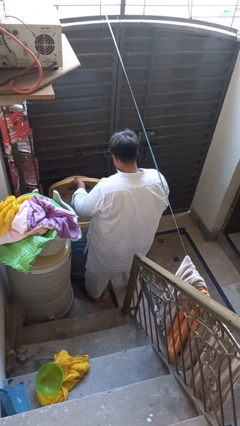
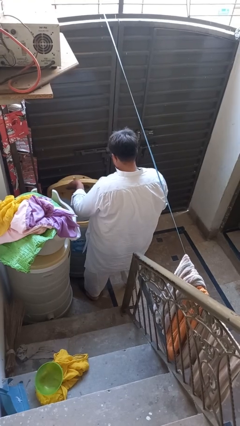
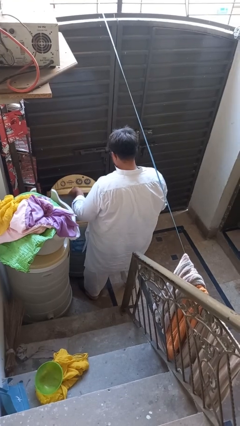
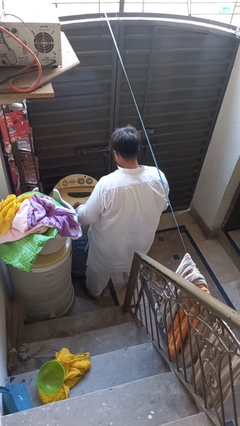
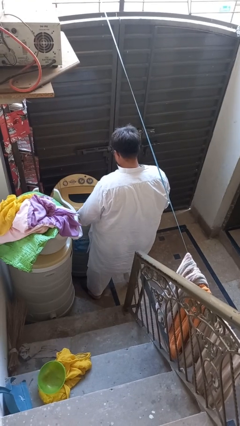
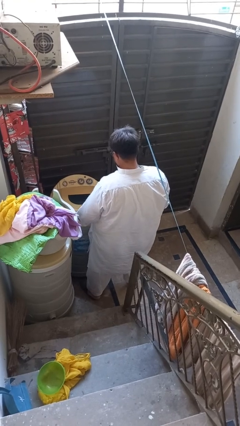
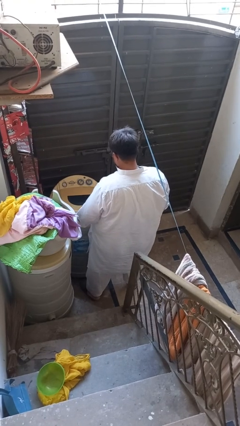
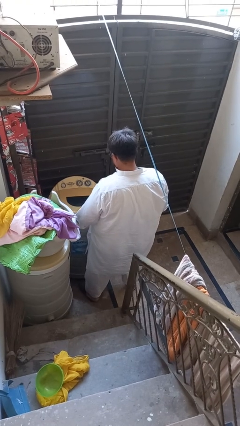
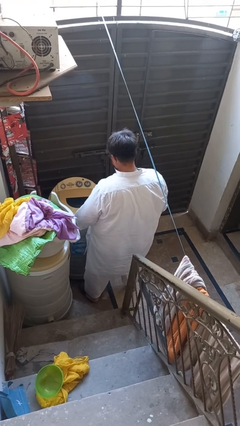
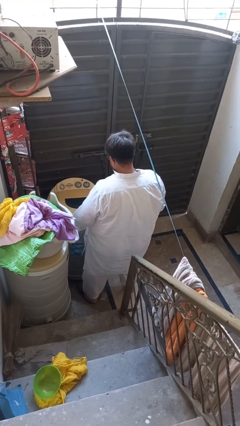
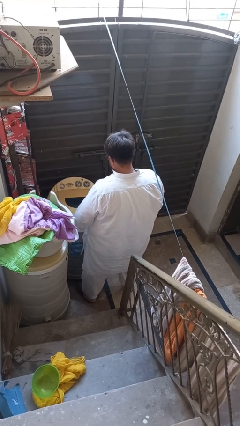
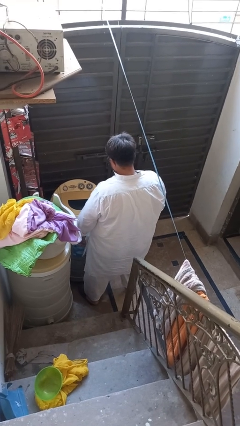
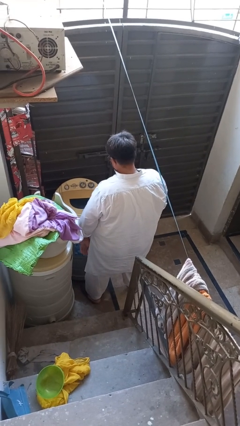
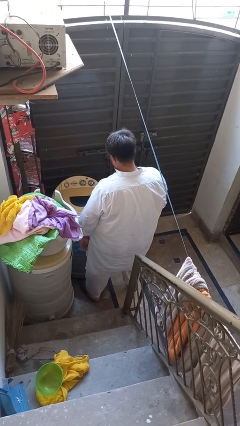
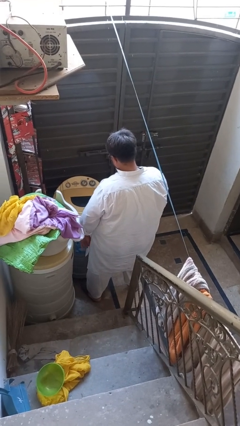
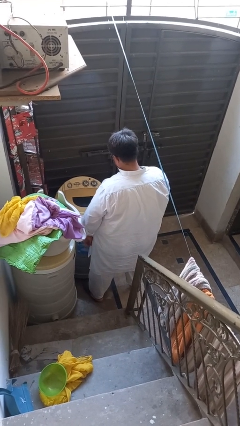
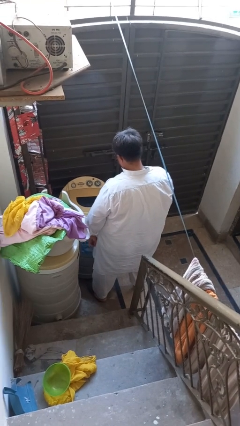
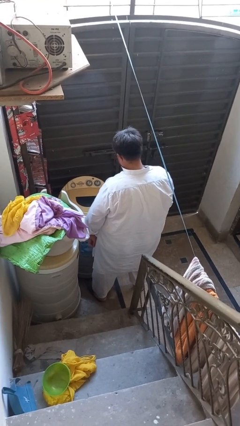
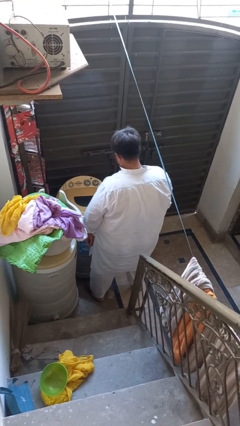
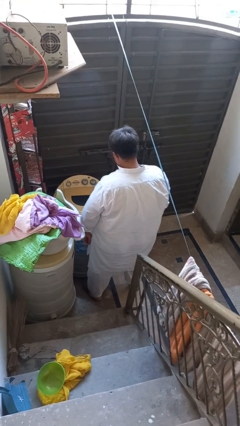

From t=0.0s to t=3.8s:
person closes clothes washer

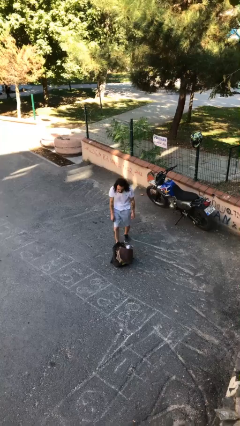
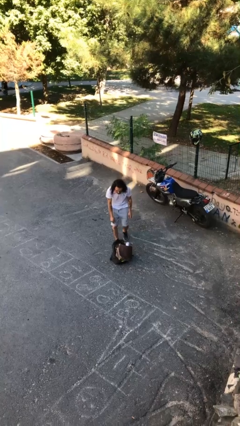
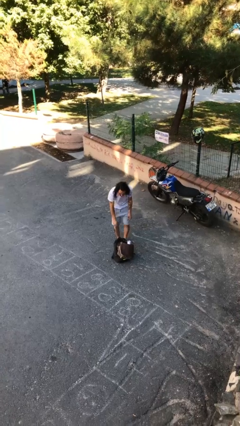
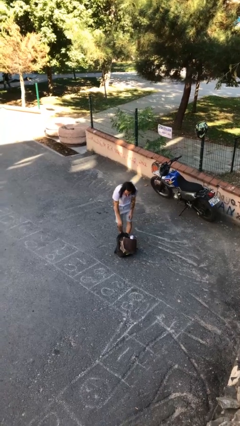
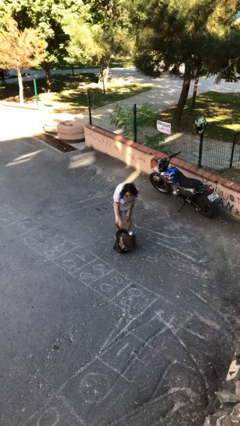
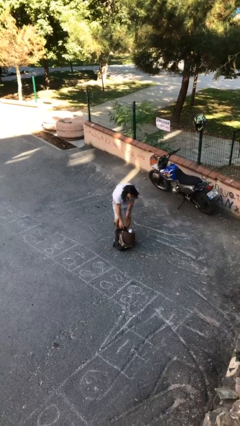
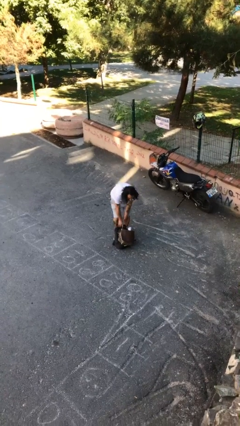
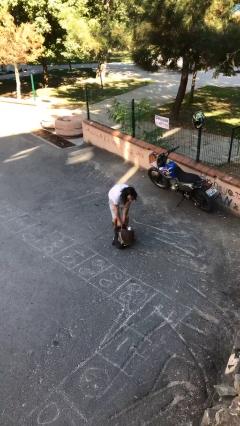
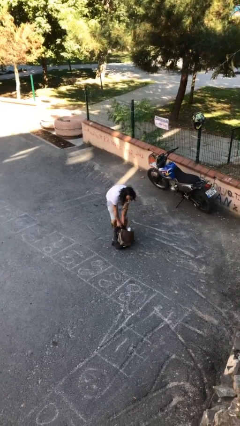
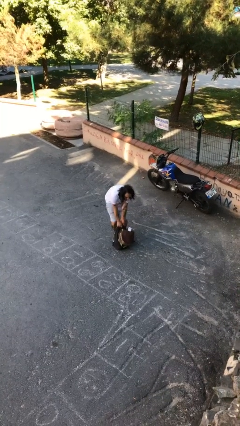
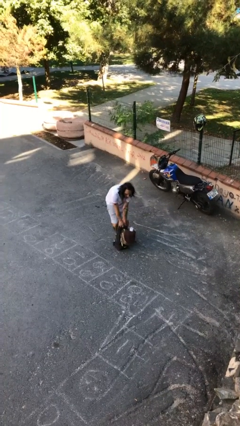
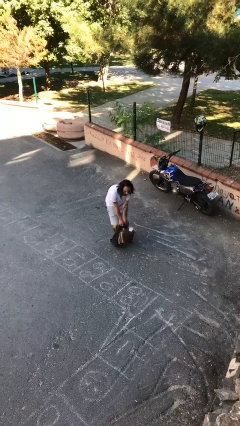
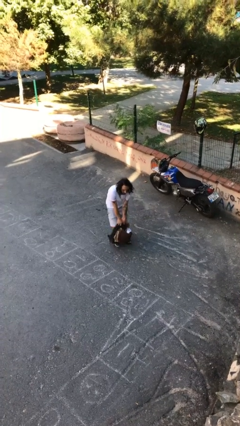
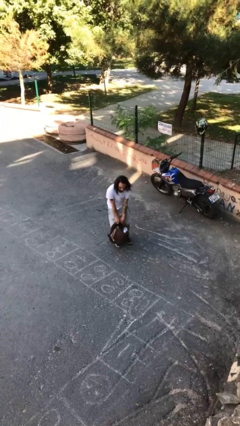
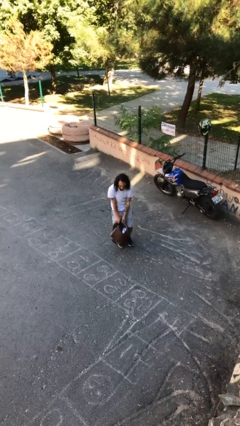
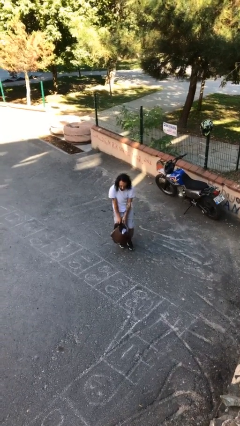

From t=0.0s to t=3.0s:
person picks up object from floor

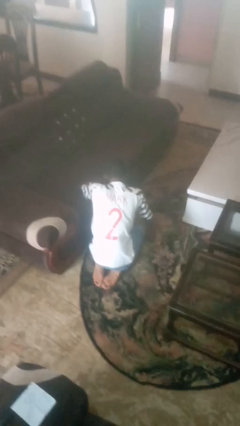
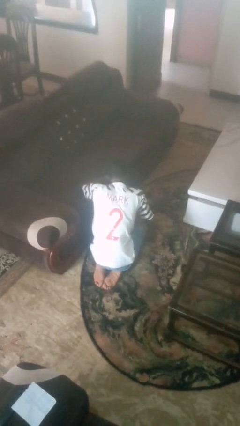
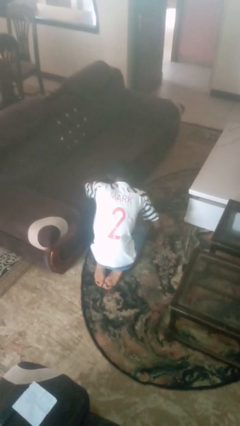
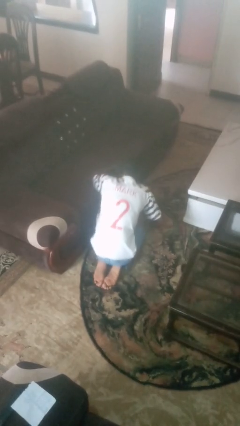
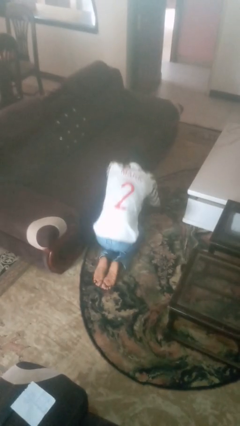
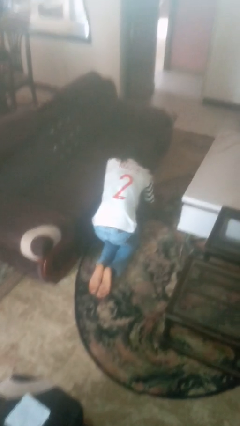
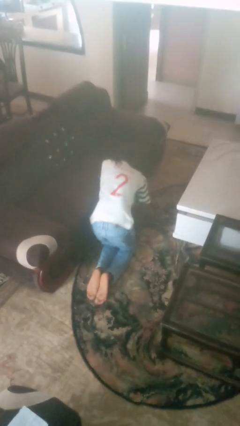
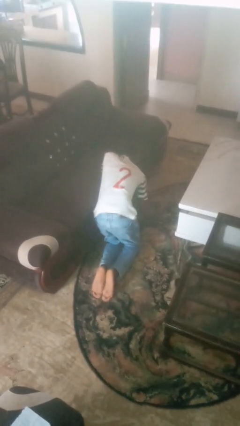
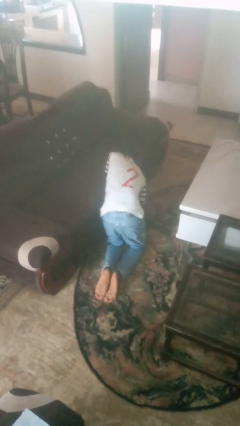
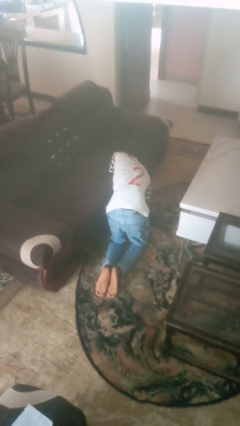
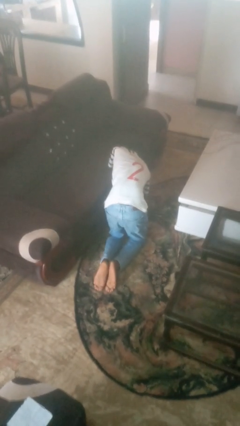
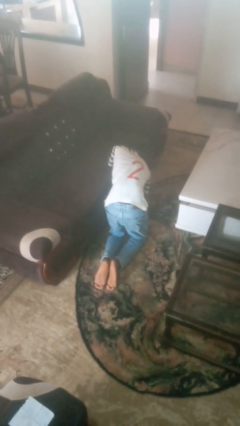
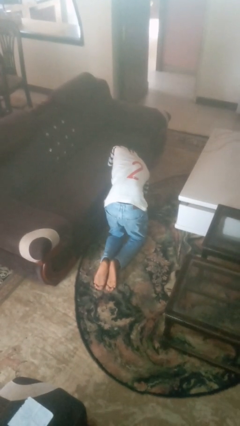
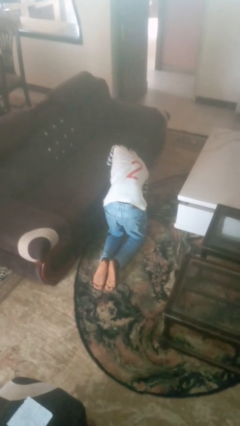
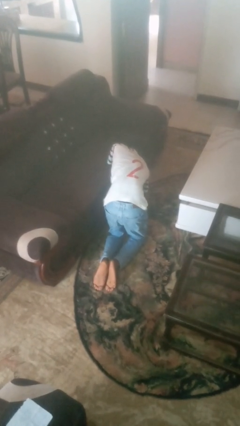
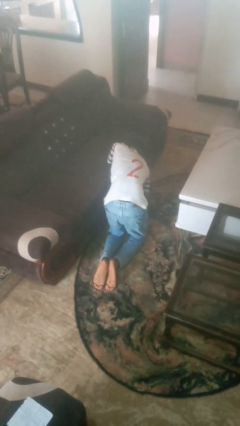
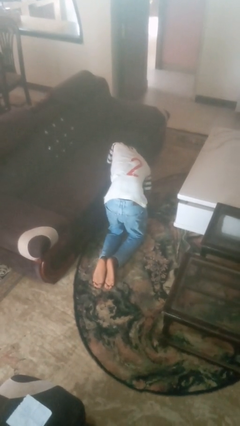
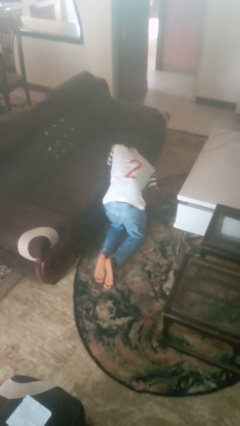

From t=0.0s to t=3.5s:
person searches under couch

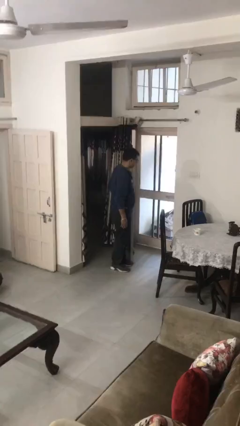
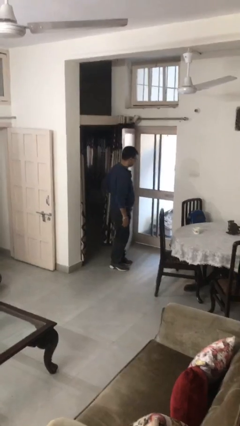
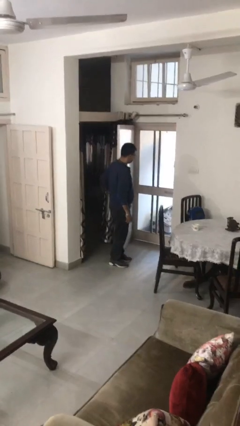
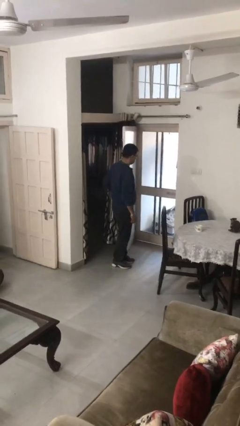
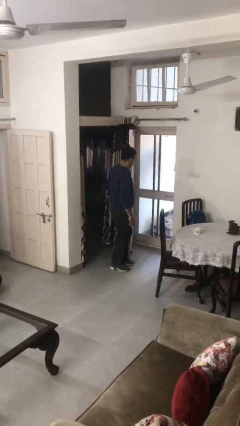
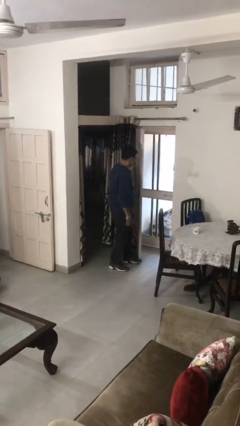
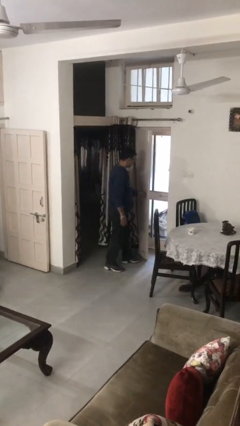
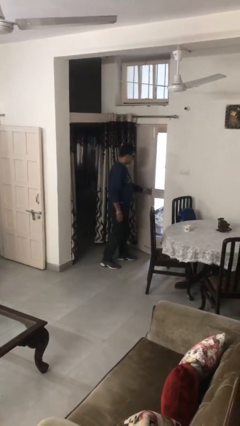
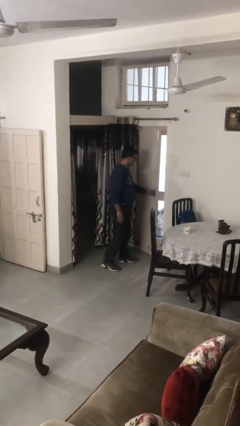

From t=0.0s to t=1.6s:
person closes facility door

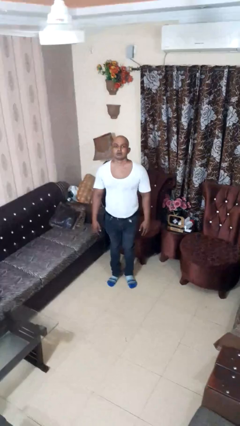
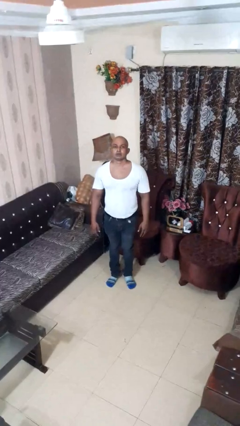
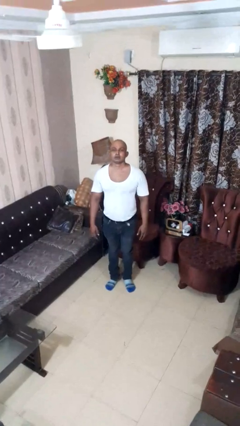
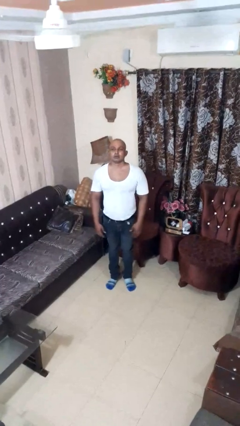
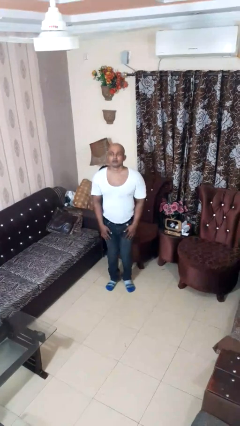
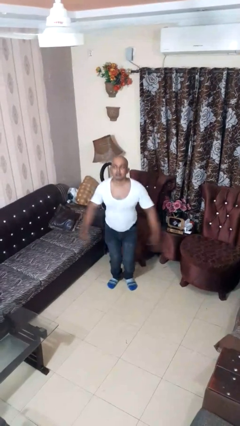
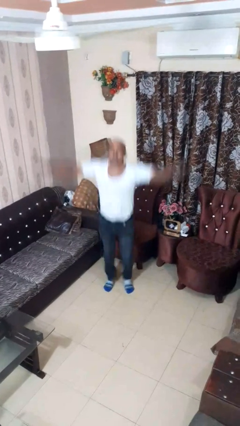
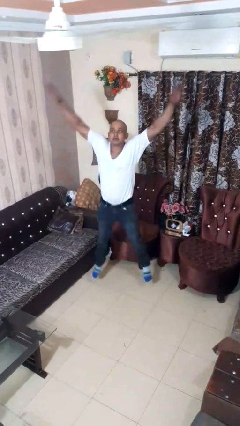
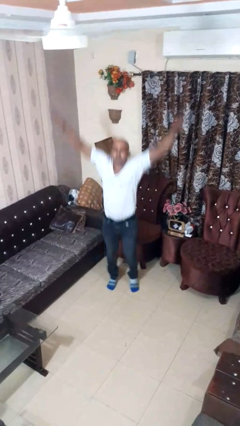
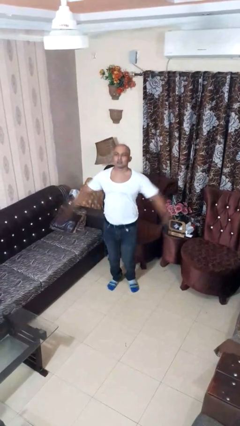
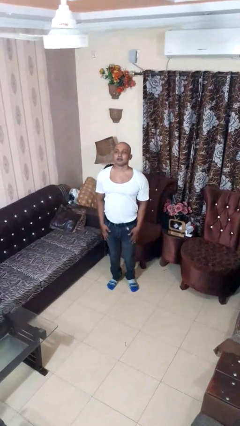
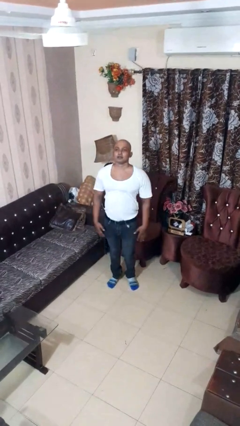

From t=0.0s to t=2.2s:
person exercises with jumping jacks

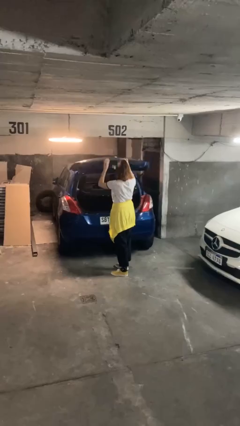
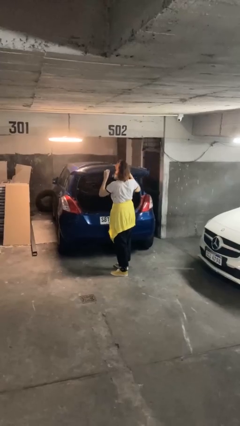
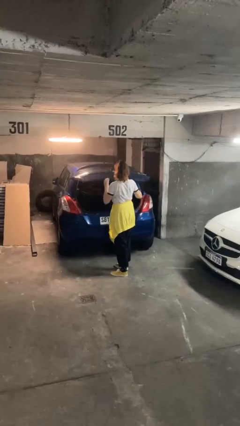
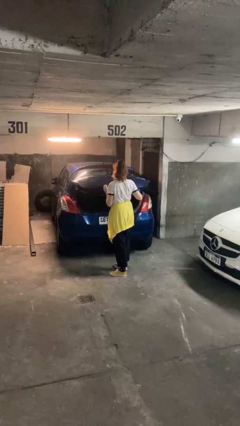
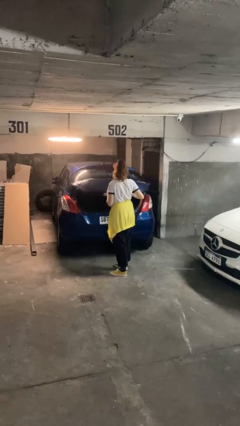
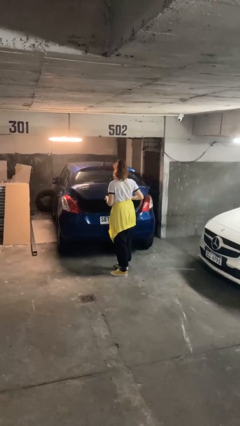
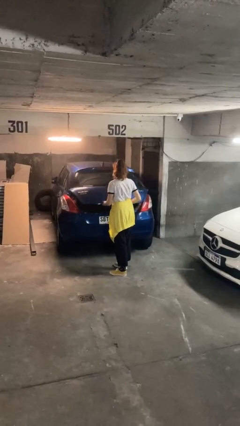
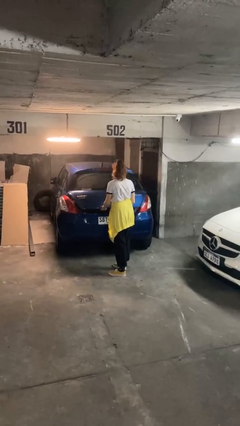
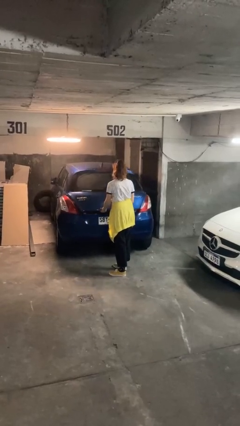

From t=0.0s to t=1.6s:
person closes car trunk

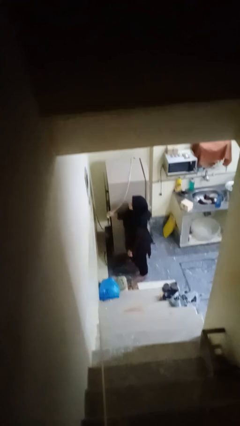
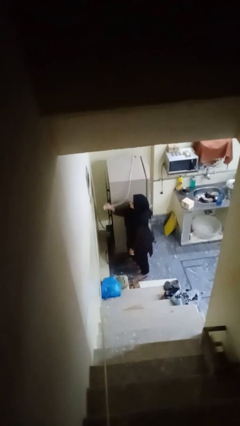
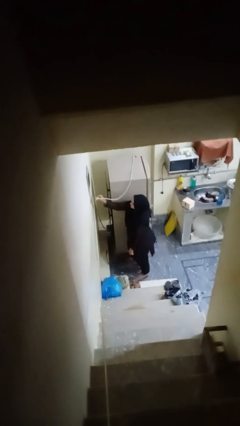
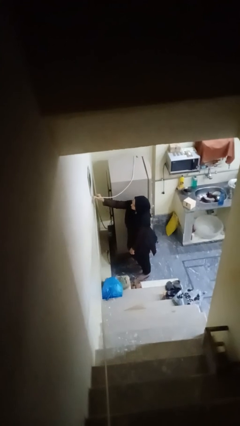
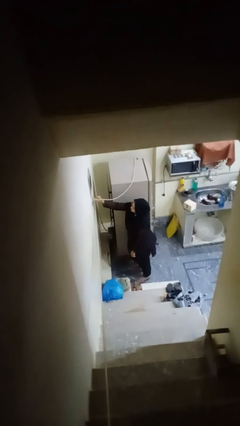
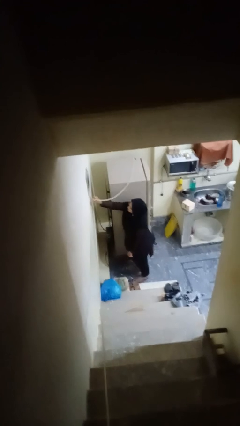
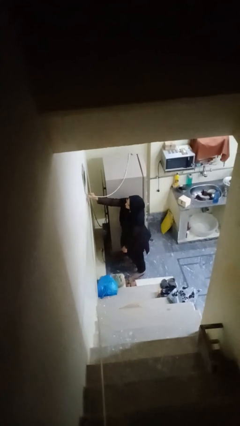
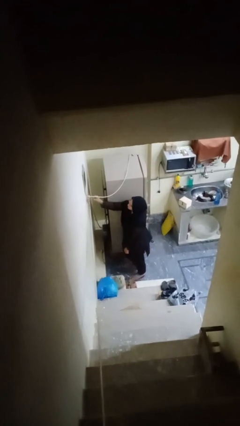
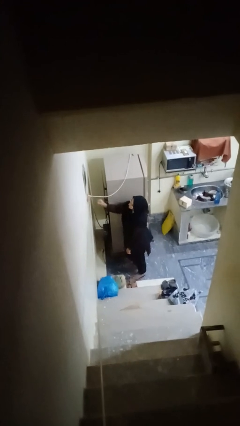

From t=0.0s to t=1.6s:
person plugs into electrical socket
